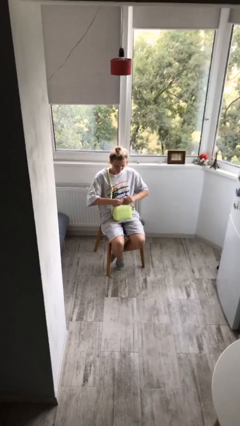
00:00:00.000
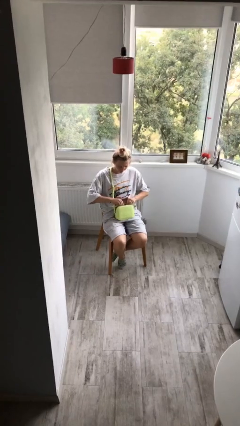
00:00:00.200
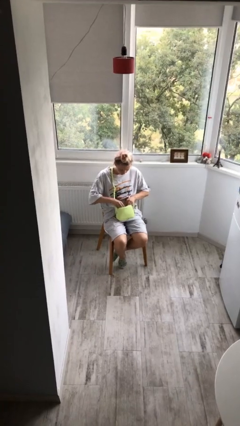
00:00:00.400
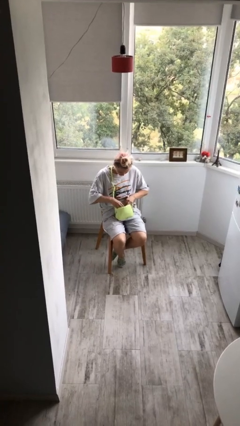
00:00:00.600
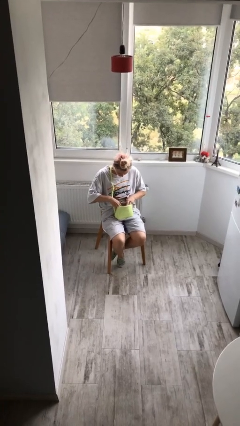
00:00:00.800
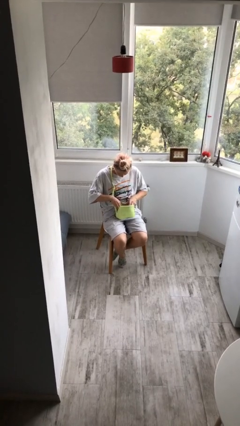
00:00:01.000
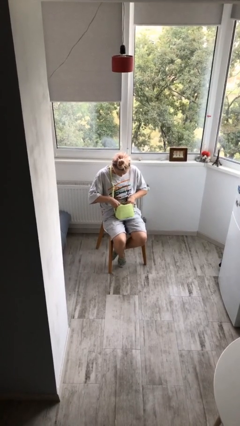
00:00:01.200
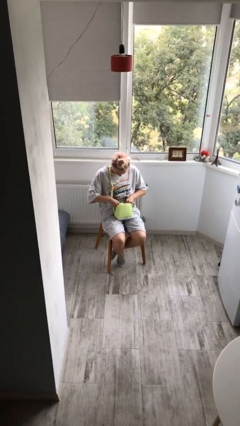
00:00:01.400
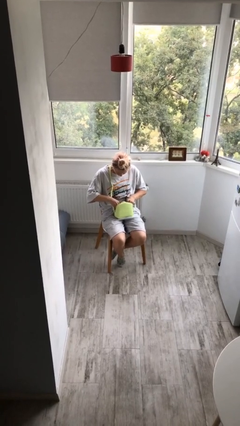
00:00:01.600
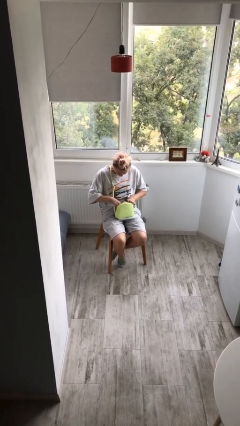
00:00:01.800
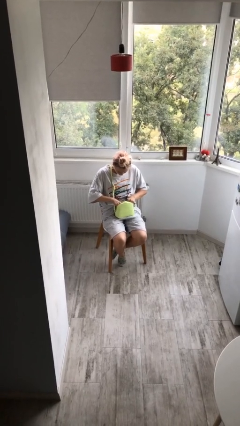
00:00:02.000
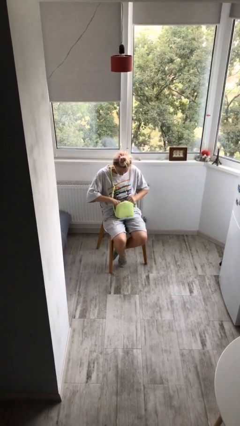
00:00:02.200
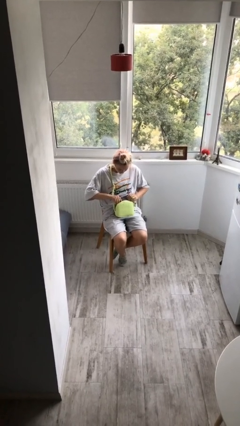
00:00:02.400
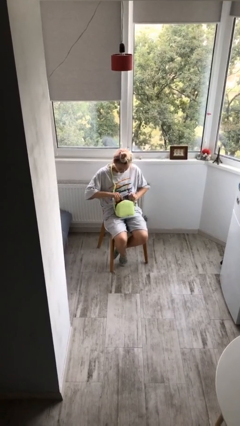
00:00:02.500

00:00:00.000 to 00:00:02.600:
person searches in purse

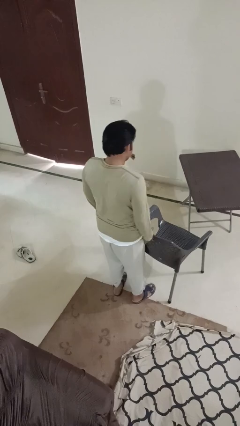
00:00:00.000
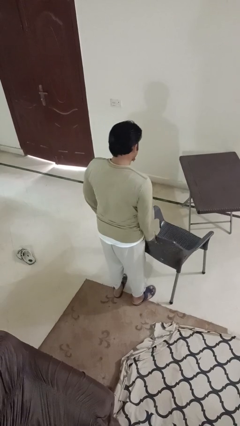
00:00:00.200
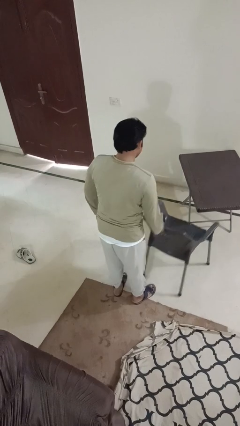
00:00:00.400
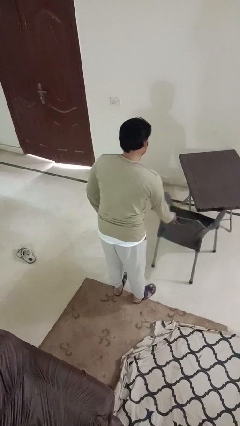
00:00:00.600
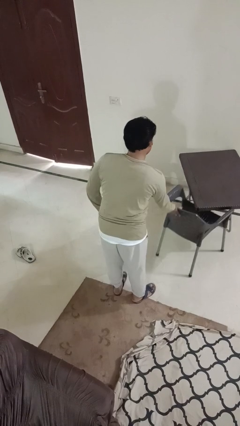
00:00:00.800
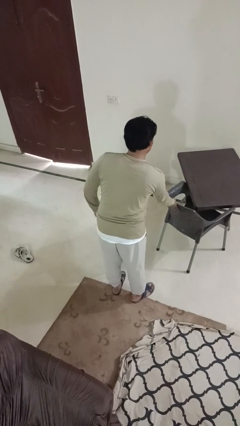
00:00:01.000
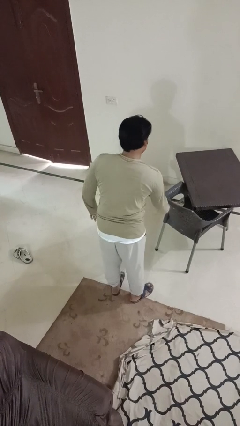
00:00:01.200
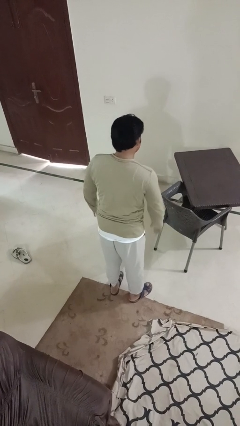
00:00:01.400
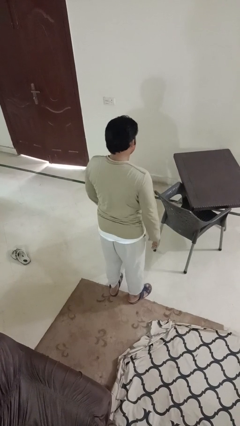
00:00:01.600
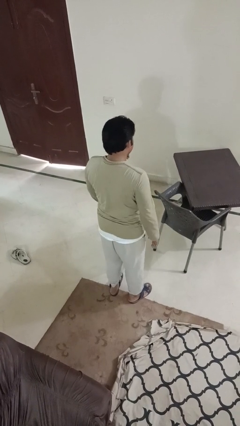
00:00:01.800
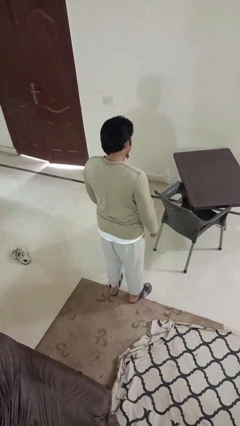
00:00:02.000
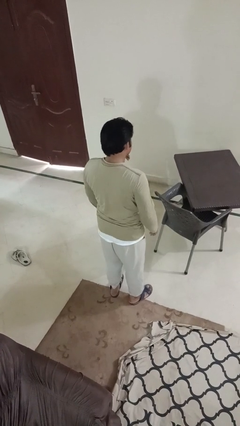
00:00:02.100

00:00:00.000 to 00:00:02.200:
person pushes in chair

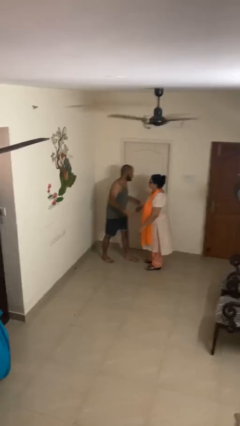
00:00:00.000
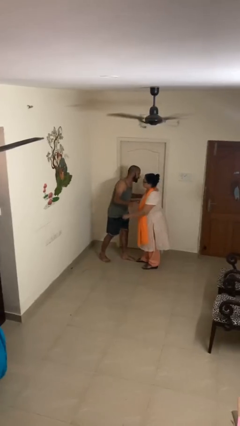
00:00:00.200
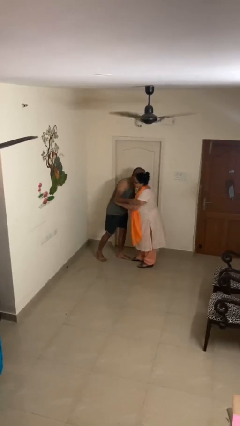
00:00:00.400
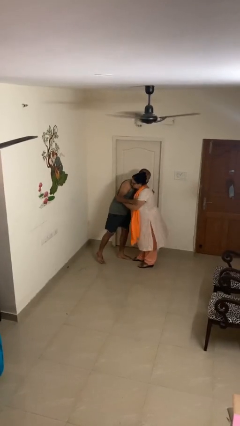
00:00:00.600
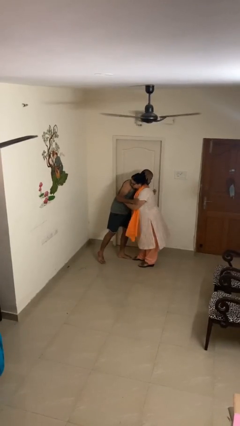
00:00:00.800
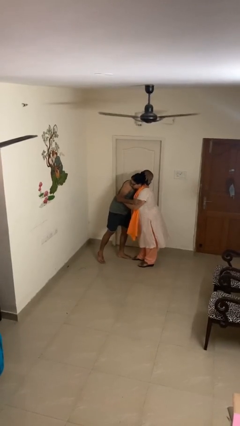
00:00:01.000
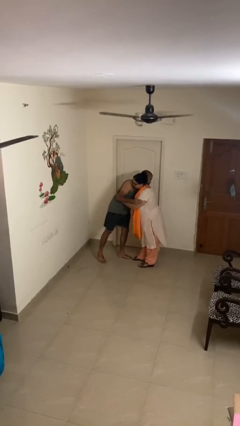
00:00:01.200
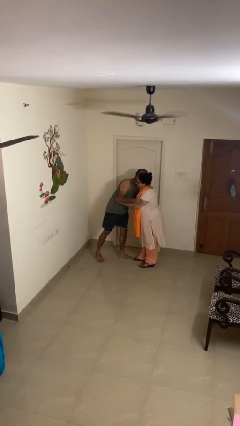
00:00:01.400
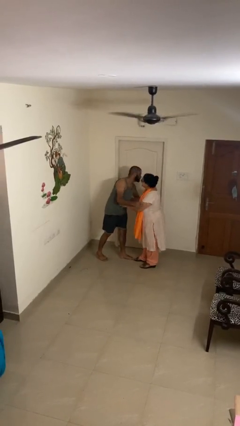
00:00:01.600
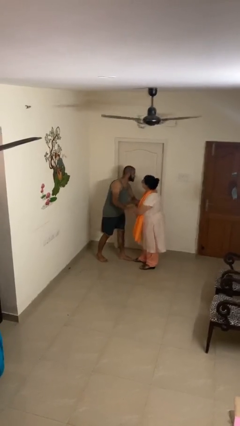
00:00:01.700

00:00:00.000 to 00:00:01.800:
person embraces person

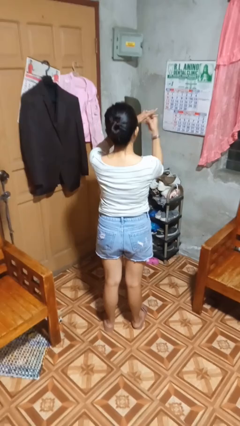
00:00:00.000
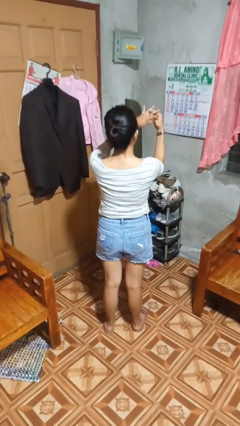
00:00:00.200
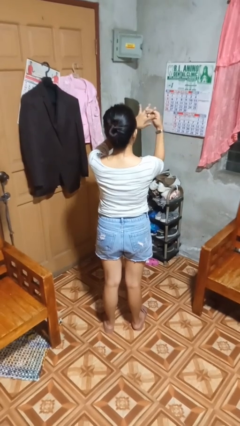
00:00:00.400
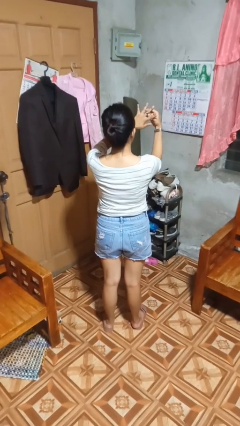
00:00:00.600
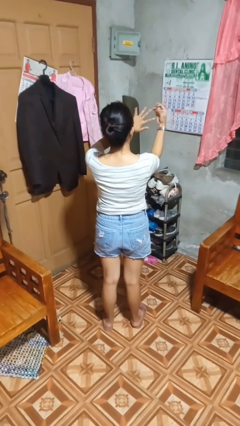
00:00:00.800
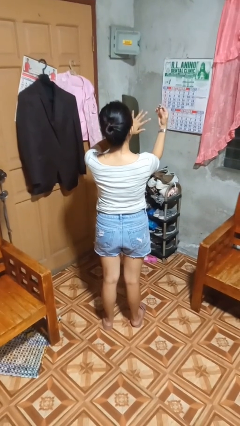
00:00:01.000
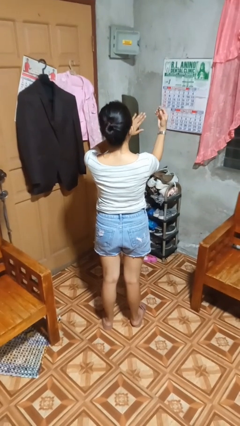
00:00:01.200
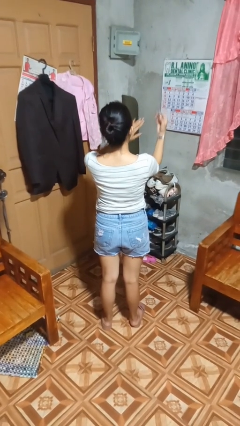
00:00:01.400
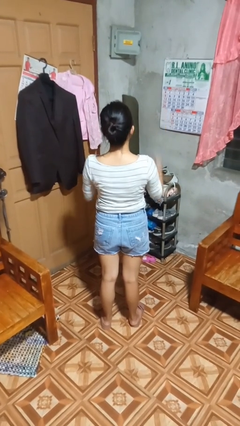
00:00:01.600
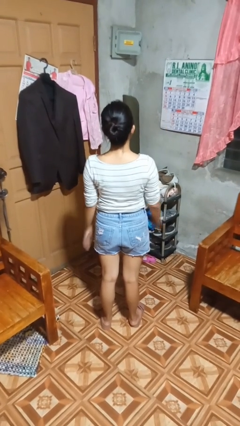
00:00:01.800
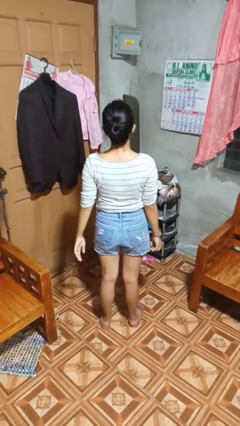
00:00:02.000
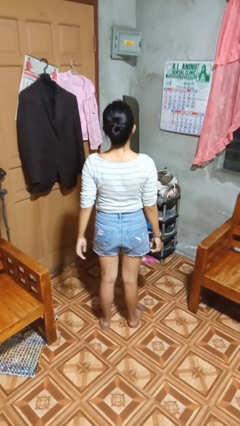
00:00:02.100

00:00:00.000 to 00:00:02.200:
person takes off ring

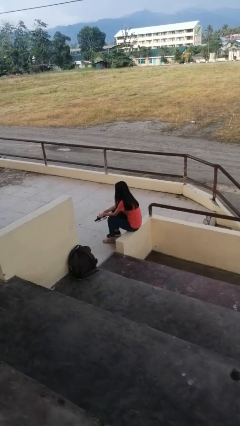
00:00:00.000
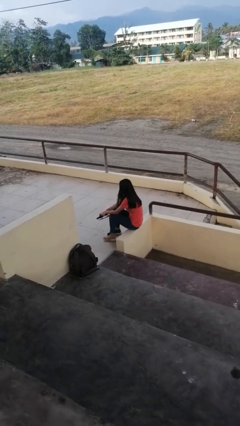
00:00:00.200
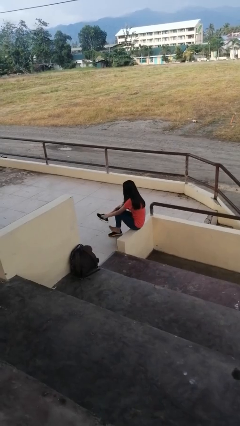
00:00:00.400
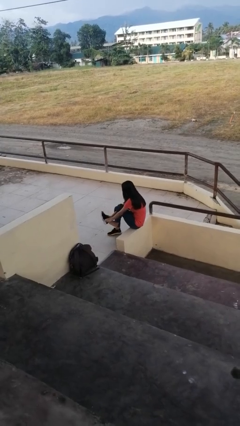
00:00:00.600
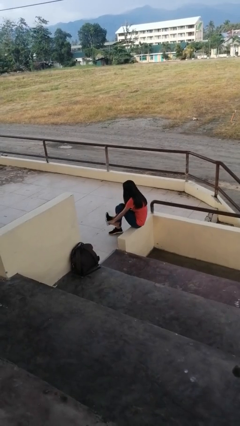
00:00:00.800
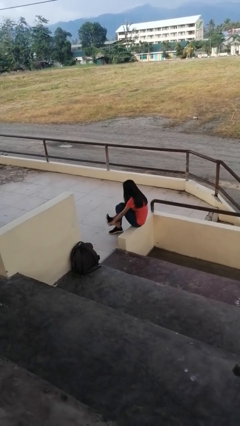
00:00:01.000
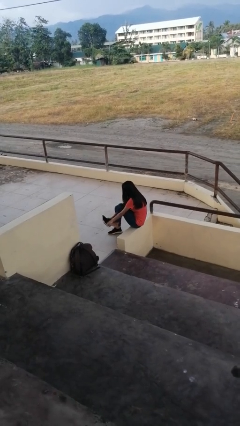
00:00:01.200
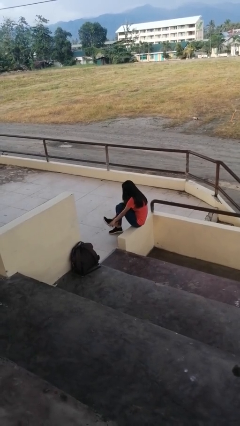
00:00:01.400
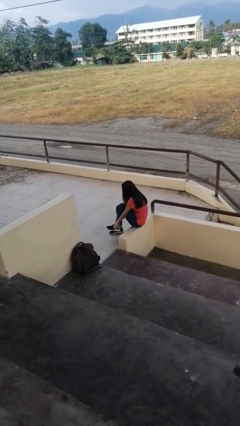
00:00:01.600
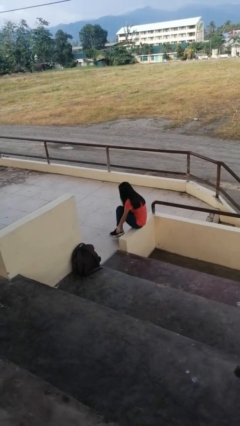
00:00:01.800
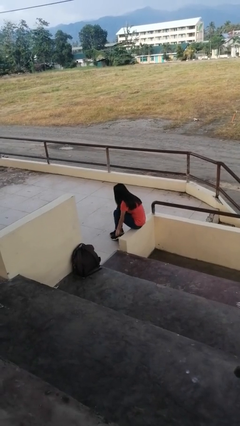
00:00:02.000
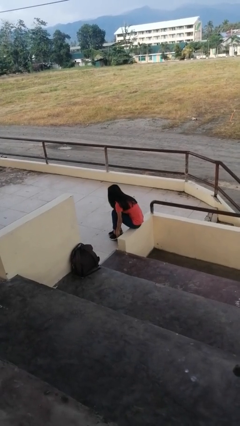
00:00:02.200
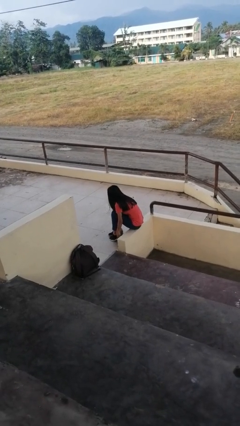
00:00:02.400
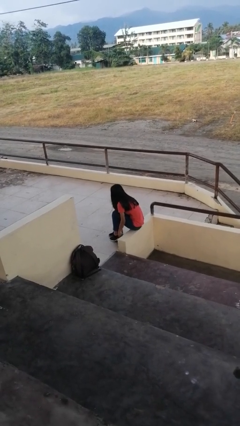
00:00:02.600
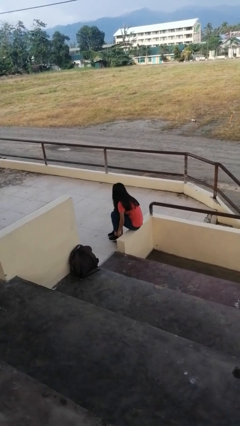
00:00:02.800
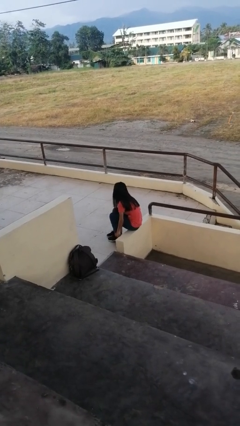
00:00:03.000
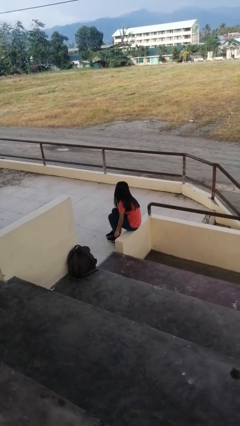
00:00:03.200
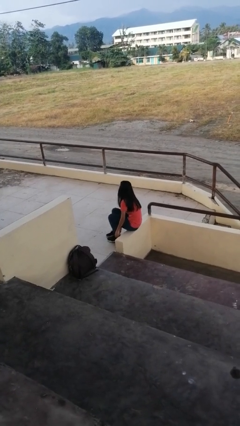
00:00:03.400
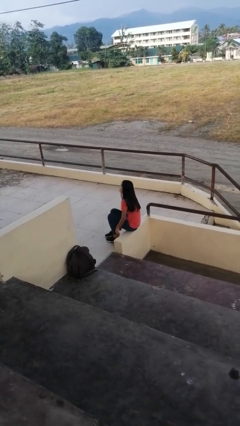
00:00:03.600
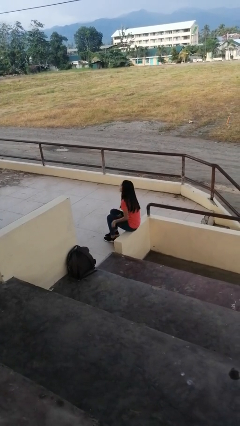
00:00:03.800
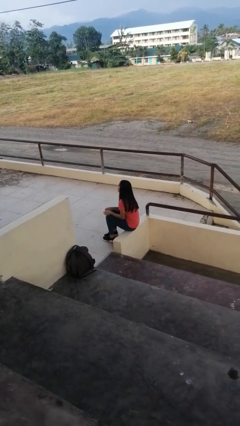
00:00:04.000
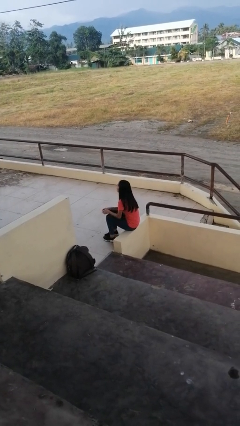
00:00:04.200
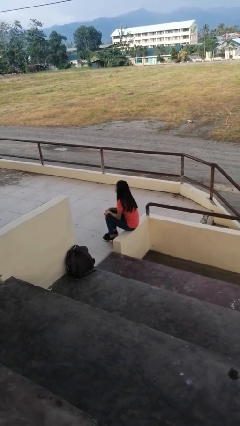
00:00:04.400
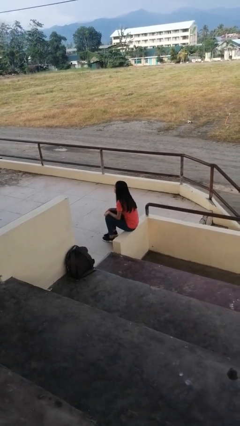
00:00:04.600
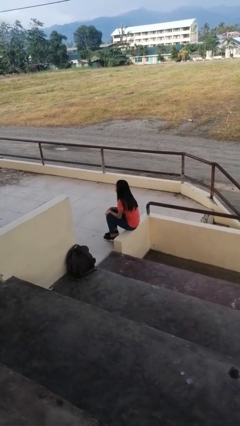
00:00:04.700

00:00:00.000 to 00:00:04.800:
person puts on shoes

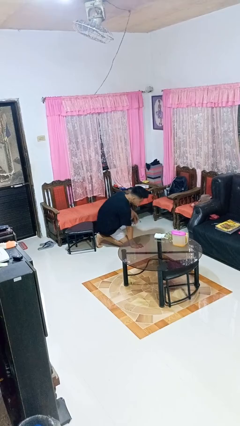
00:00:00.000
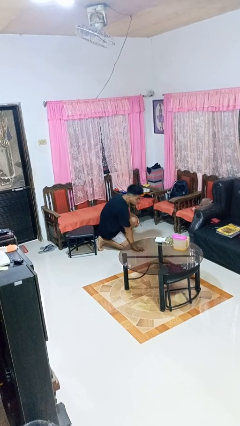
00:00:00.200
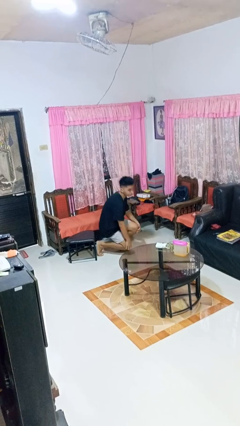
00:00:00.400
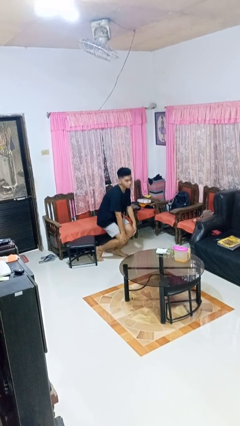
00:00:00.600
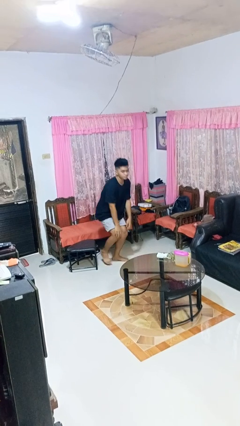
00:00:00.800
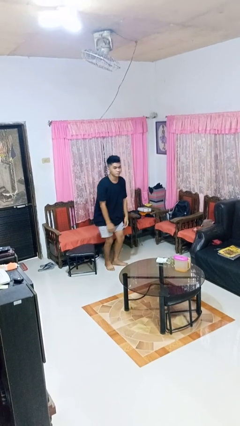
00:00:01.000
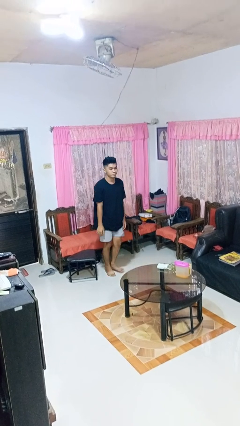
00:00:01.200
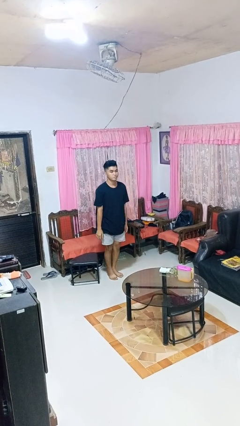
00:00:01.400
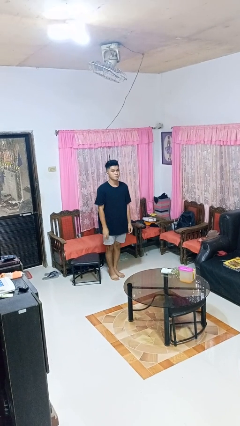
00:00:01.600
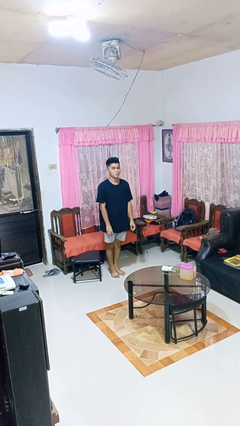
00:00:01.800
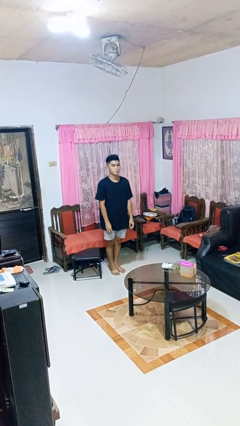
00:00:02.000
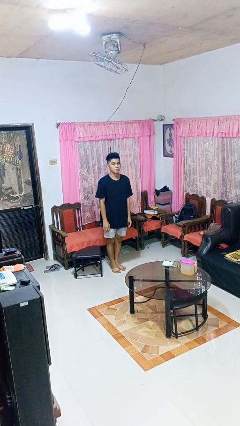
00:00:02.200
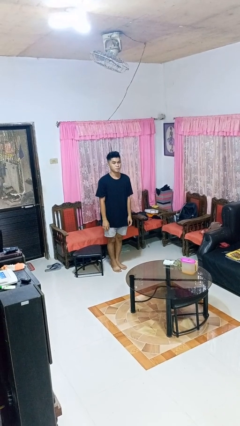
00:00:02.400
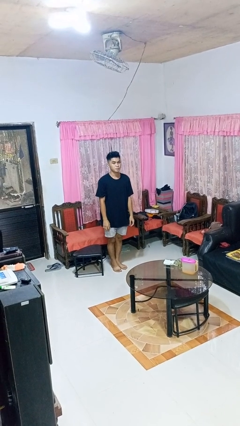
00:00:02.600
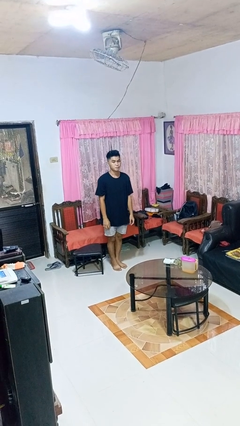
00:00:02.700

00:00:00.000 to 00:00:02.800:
person stands up from floor

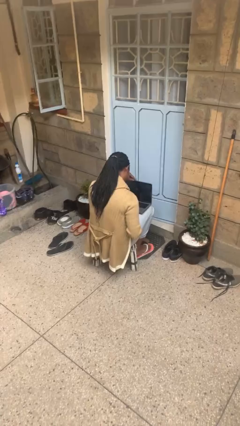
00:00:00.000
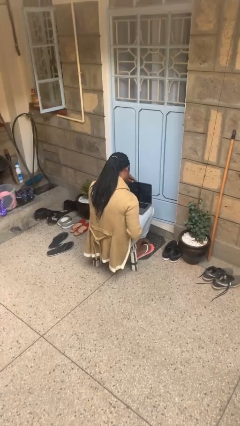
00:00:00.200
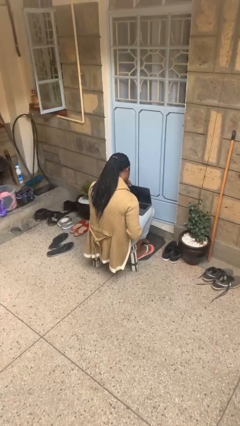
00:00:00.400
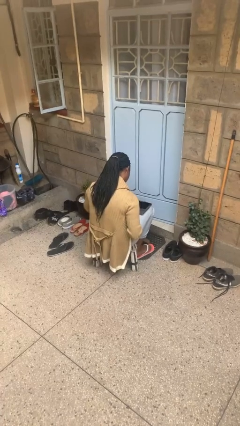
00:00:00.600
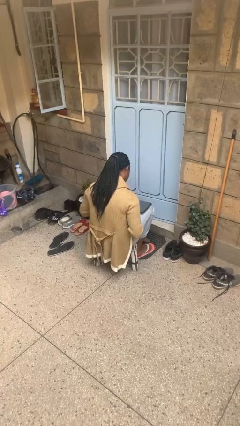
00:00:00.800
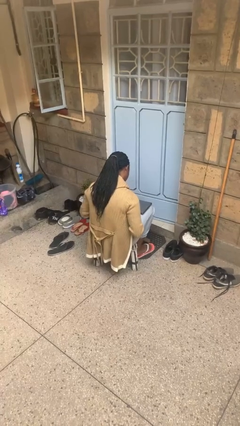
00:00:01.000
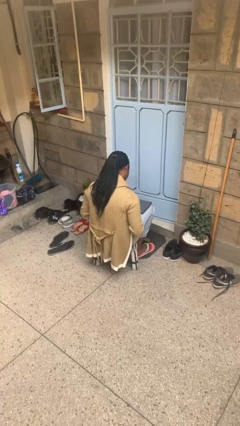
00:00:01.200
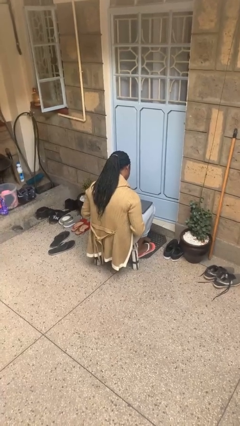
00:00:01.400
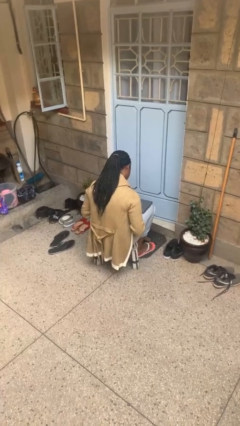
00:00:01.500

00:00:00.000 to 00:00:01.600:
person closes laptop
